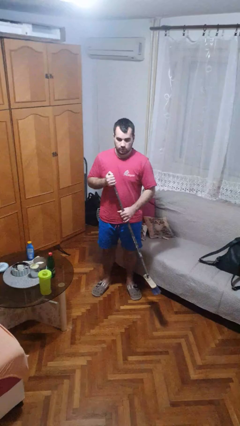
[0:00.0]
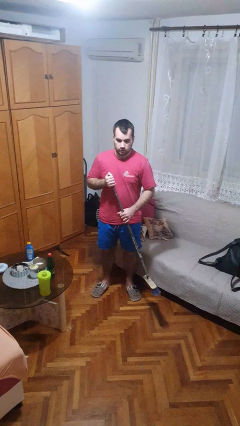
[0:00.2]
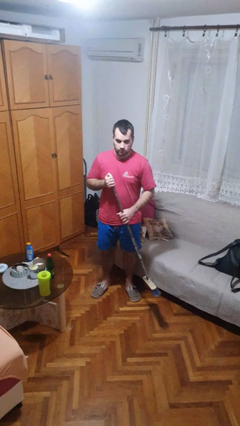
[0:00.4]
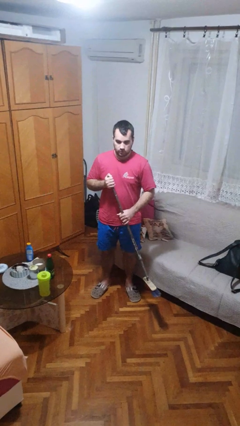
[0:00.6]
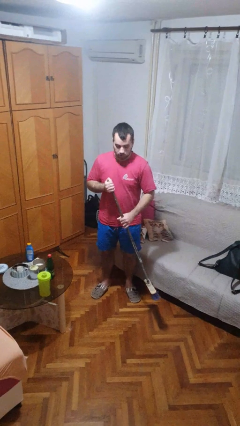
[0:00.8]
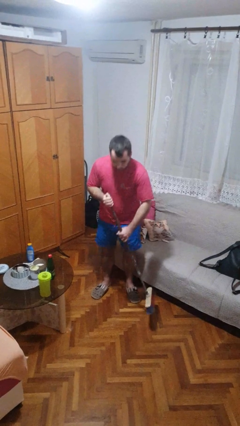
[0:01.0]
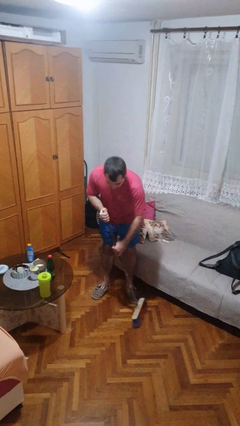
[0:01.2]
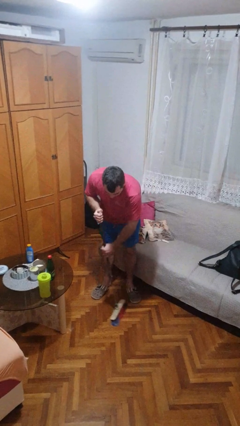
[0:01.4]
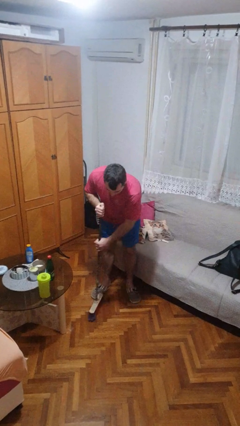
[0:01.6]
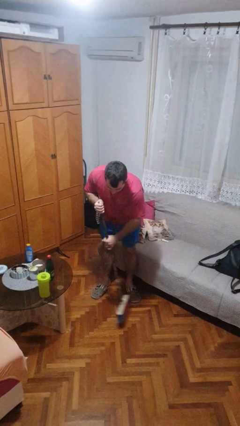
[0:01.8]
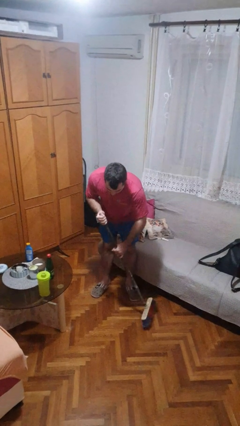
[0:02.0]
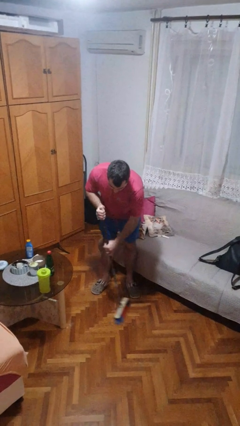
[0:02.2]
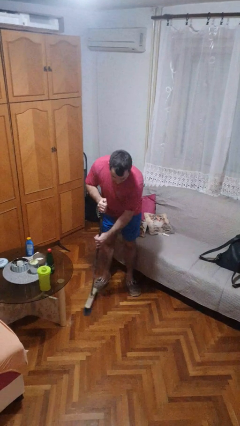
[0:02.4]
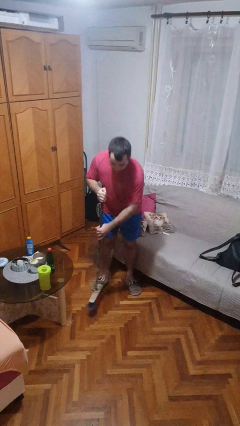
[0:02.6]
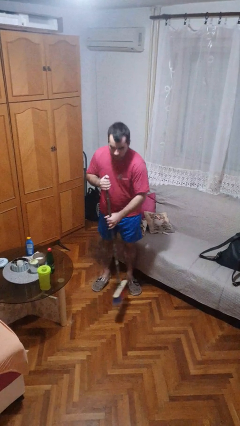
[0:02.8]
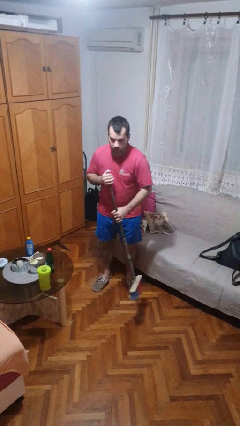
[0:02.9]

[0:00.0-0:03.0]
person sweeps floor

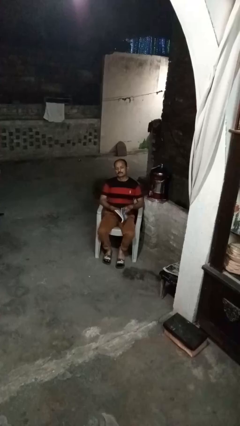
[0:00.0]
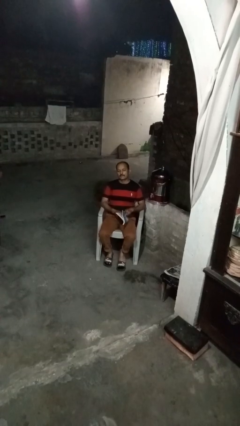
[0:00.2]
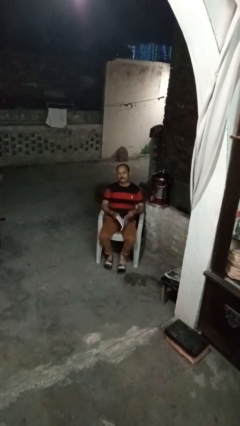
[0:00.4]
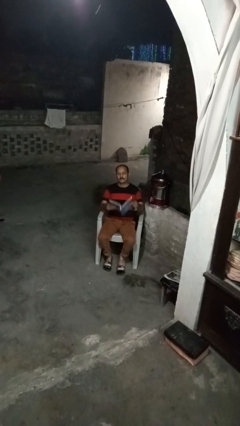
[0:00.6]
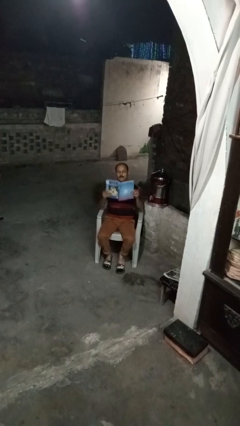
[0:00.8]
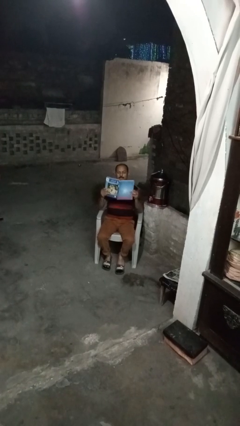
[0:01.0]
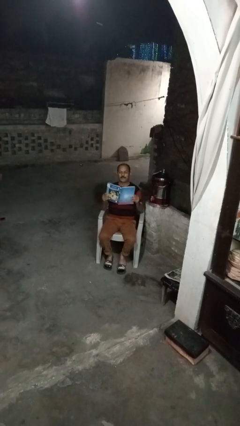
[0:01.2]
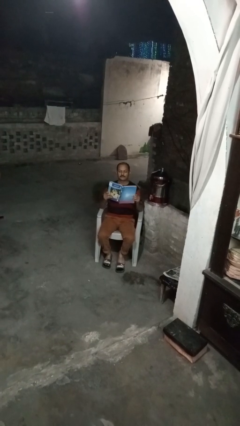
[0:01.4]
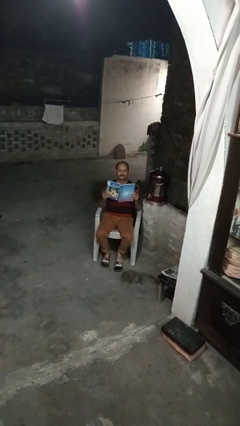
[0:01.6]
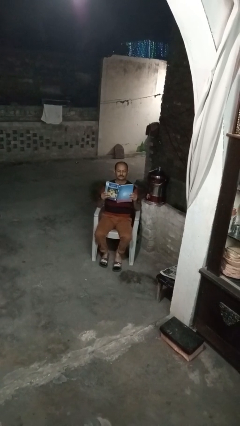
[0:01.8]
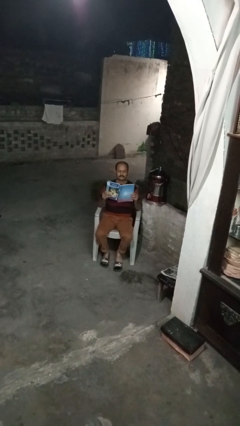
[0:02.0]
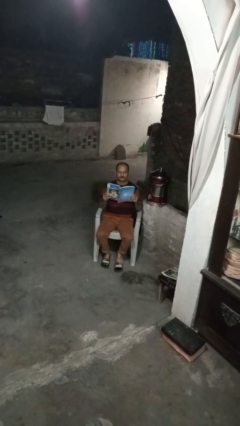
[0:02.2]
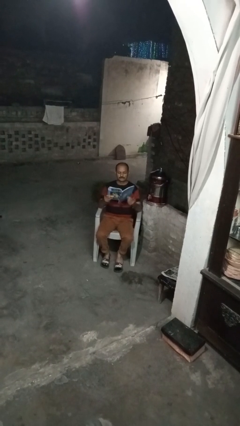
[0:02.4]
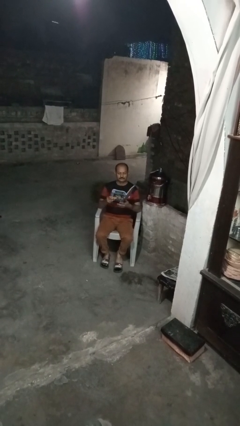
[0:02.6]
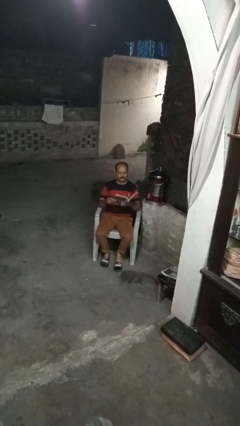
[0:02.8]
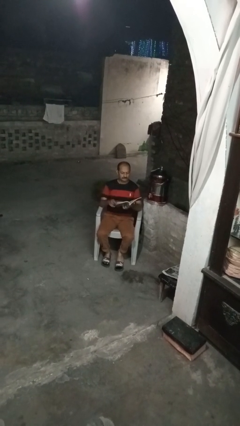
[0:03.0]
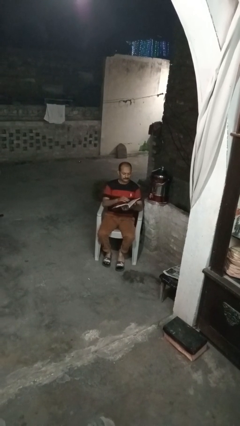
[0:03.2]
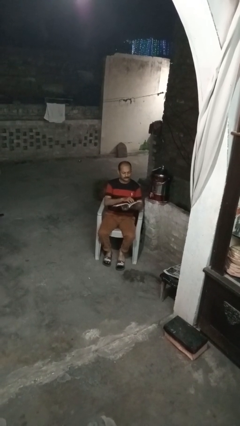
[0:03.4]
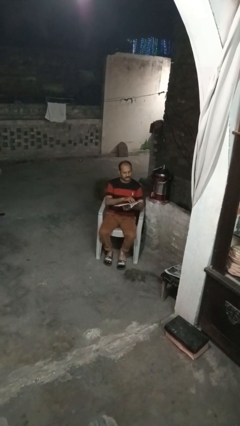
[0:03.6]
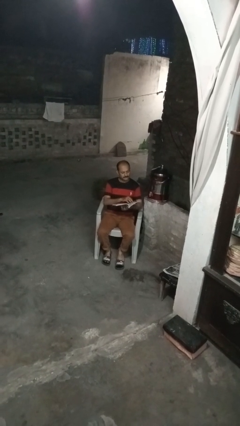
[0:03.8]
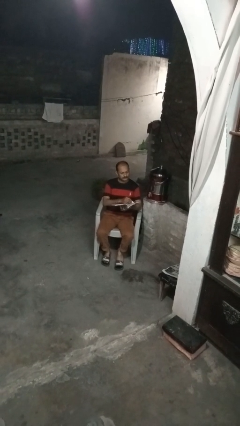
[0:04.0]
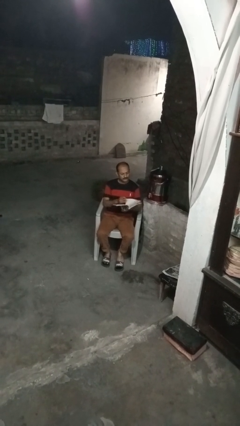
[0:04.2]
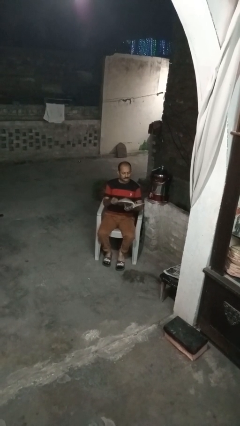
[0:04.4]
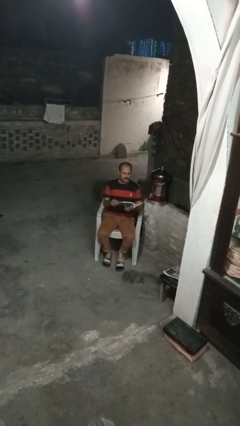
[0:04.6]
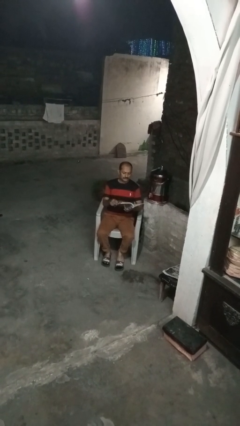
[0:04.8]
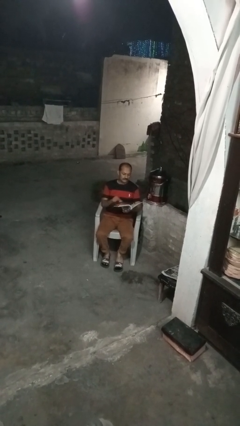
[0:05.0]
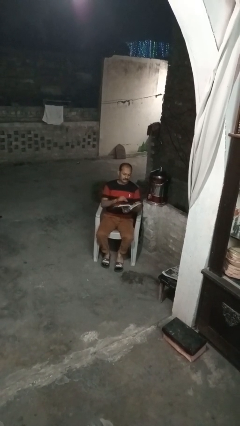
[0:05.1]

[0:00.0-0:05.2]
person reads book

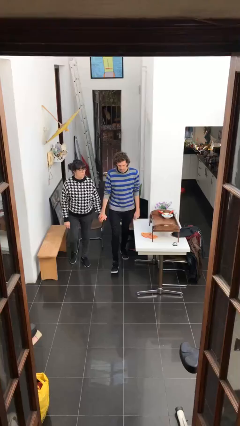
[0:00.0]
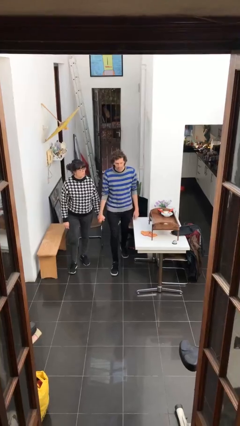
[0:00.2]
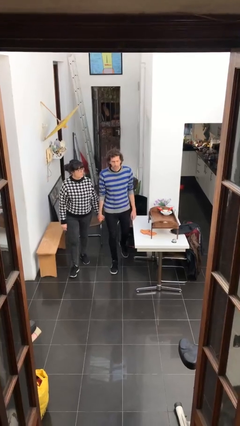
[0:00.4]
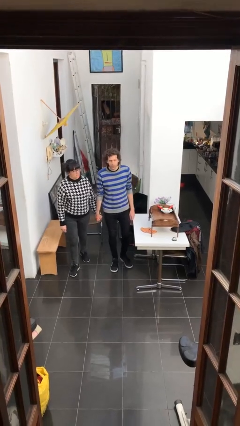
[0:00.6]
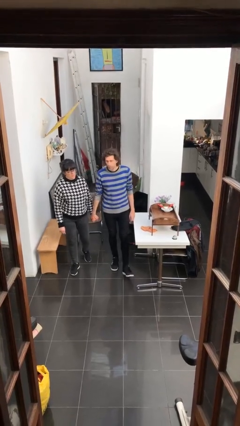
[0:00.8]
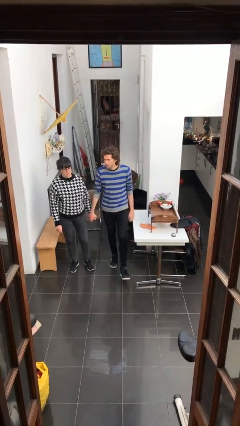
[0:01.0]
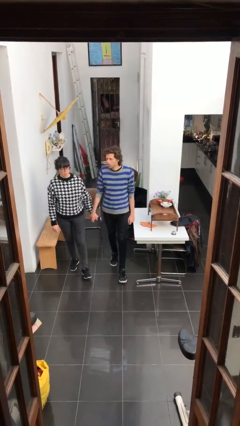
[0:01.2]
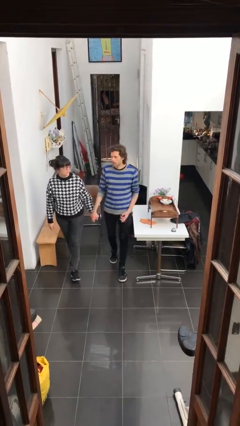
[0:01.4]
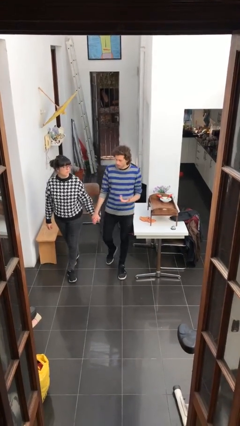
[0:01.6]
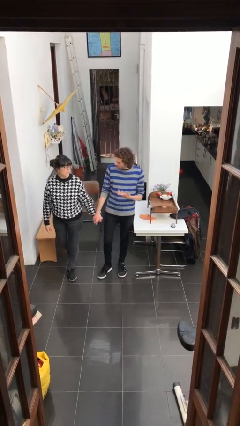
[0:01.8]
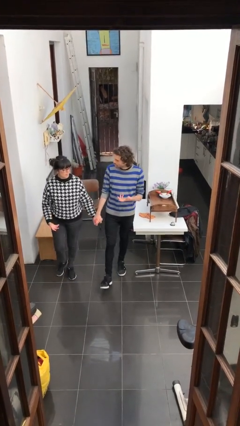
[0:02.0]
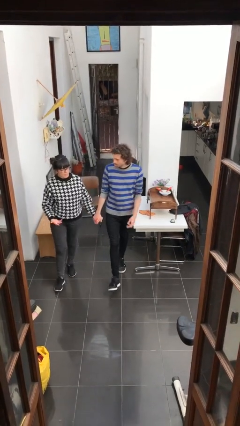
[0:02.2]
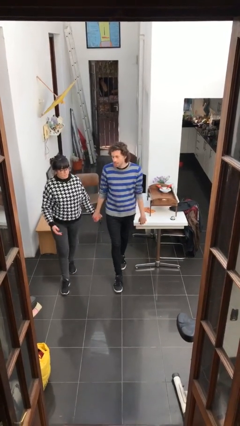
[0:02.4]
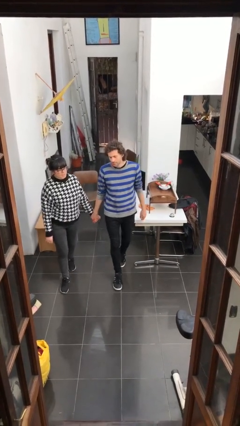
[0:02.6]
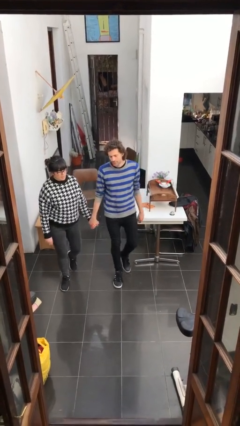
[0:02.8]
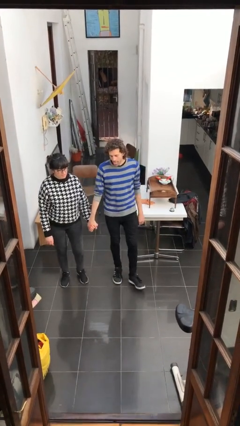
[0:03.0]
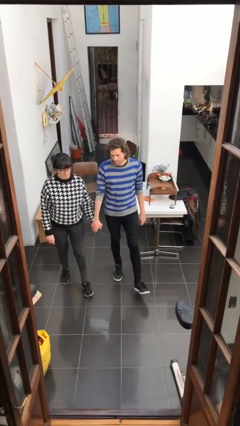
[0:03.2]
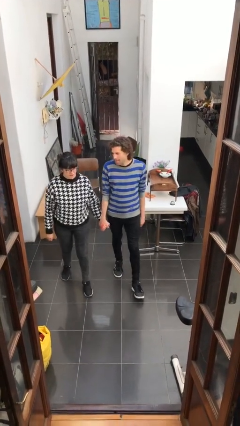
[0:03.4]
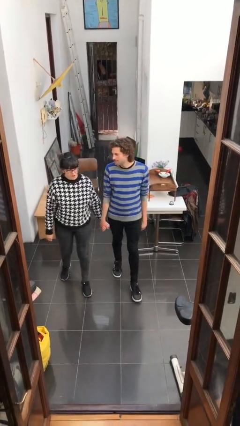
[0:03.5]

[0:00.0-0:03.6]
person holds hand

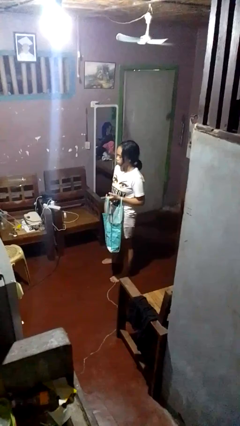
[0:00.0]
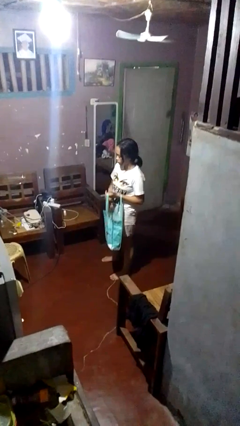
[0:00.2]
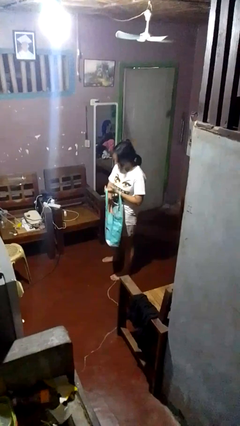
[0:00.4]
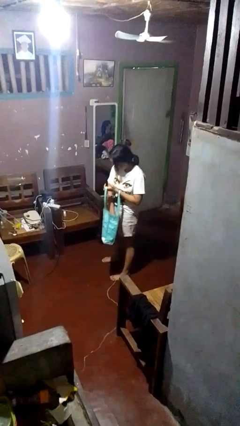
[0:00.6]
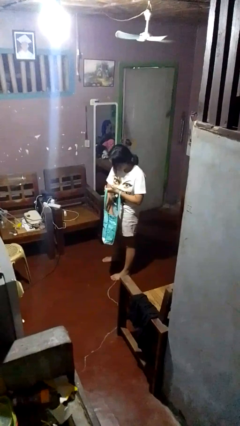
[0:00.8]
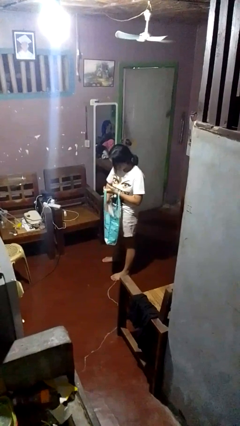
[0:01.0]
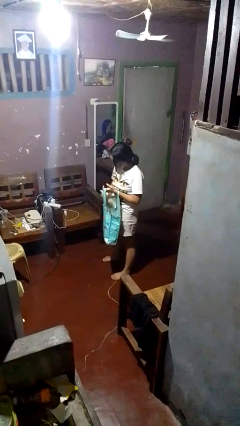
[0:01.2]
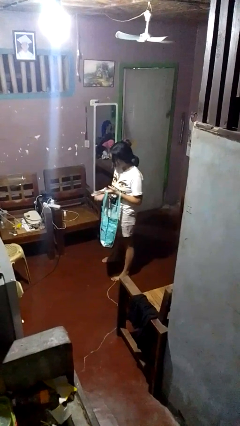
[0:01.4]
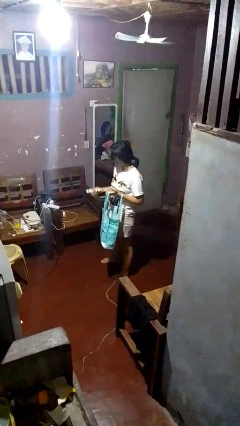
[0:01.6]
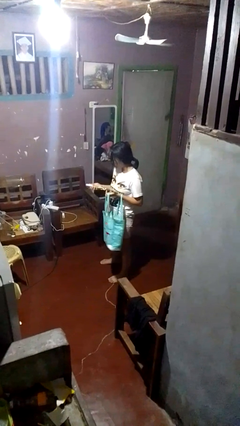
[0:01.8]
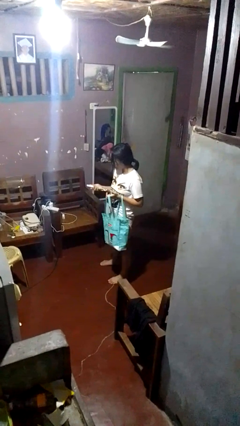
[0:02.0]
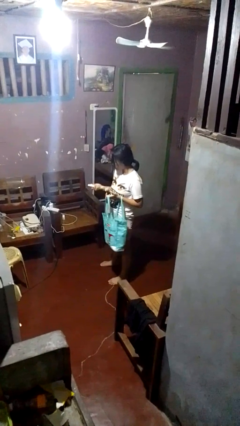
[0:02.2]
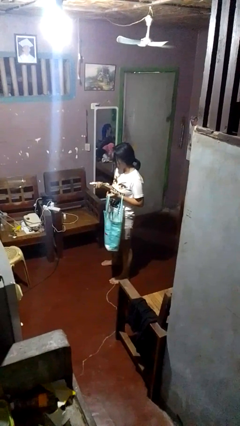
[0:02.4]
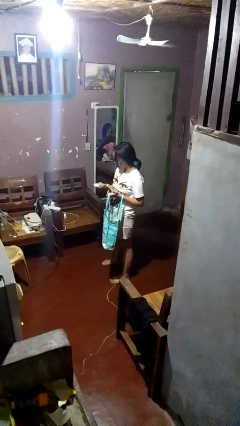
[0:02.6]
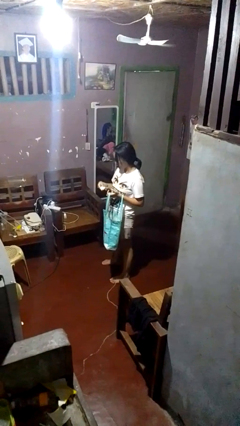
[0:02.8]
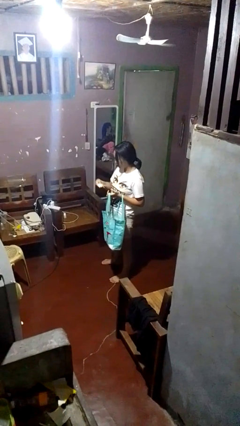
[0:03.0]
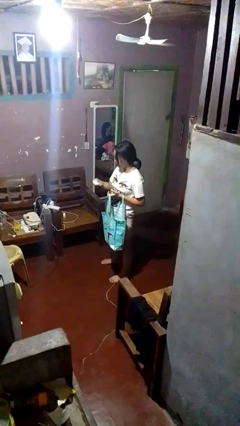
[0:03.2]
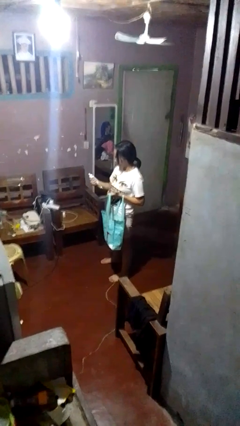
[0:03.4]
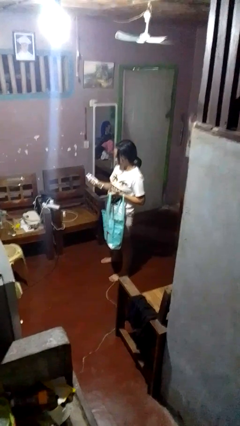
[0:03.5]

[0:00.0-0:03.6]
person takes object from bag

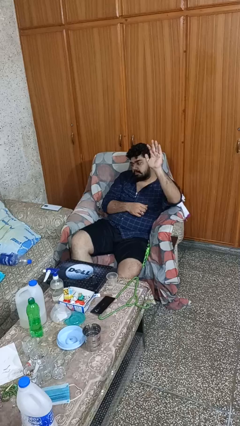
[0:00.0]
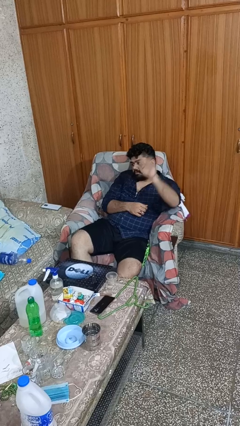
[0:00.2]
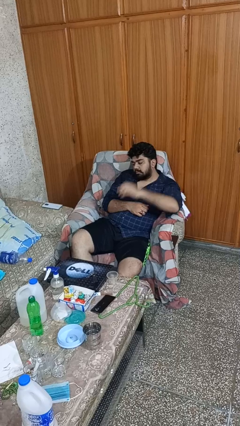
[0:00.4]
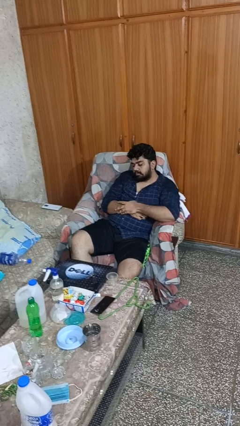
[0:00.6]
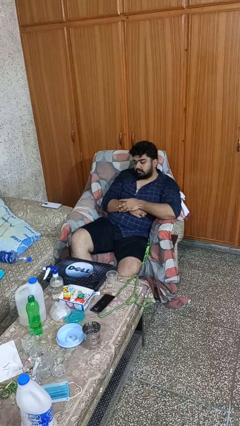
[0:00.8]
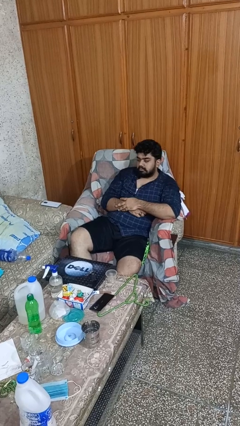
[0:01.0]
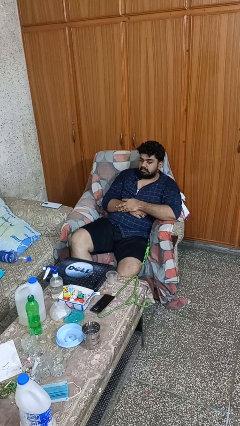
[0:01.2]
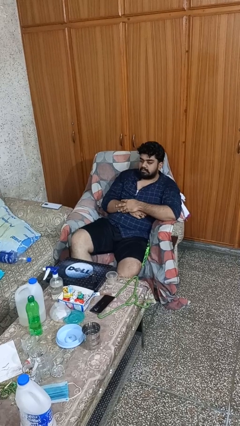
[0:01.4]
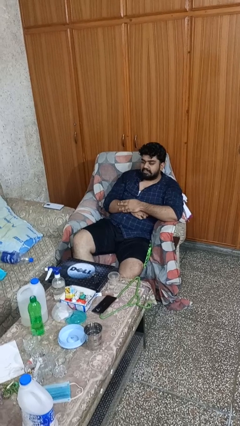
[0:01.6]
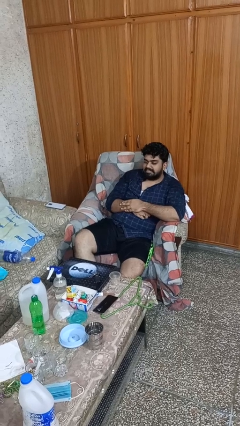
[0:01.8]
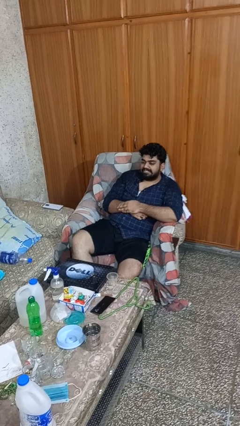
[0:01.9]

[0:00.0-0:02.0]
person gestures lower hand

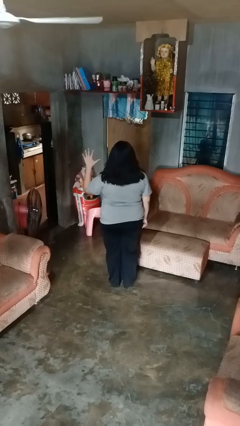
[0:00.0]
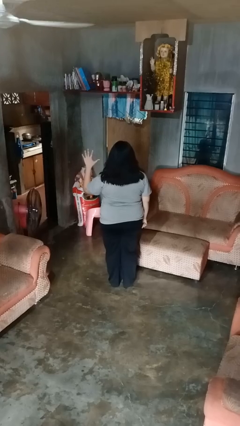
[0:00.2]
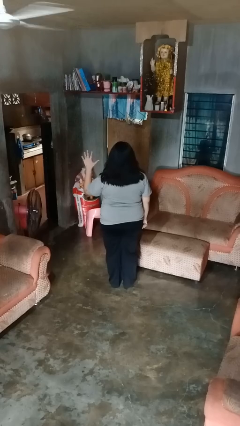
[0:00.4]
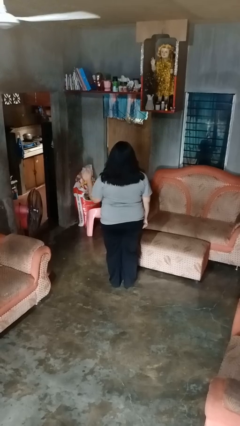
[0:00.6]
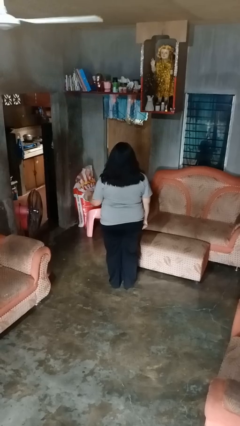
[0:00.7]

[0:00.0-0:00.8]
person gestures number five
